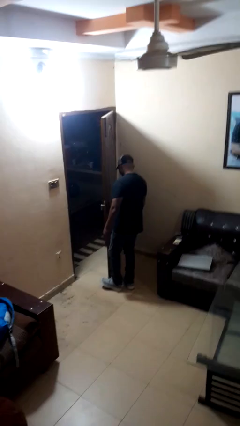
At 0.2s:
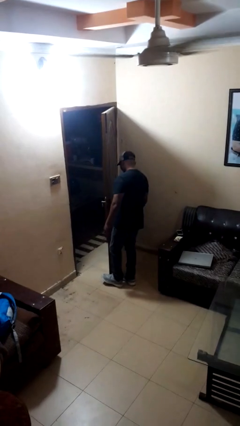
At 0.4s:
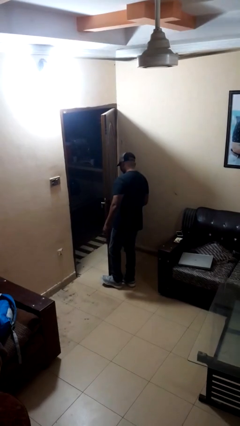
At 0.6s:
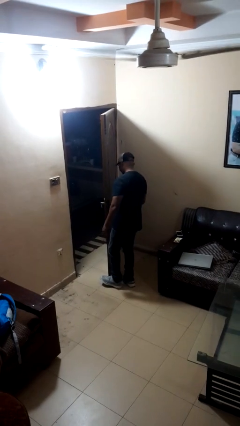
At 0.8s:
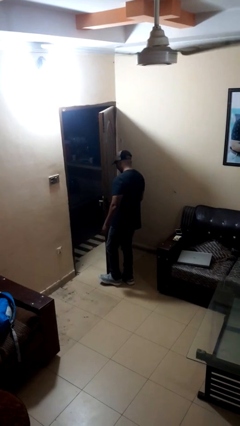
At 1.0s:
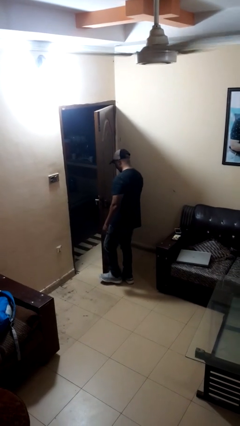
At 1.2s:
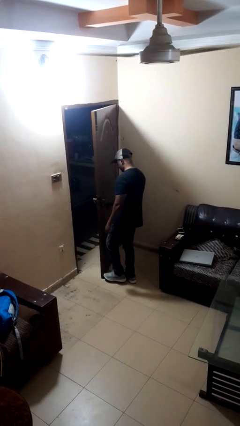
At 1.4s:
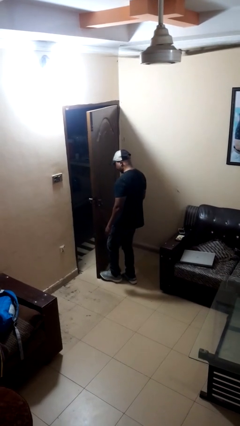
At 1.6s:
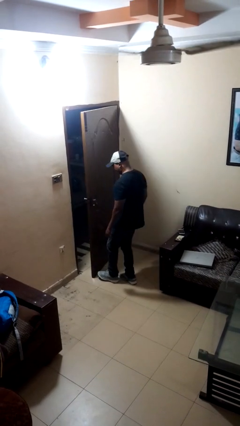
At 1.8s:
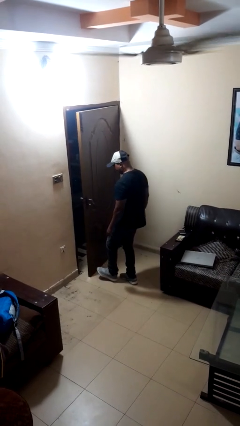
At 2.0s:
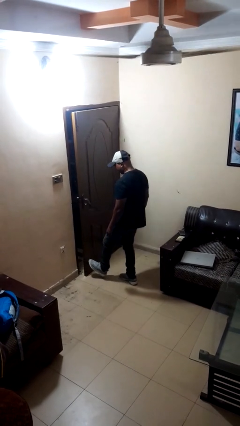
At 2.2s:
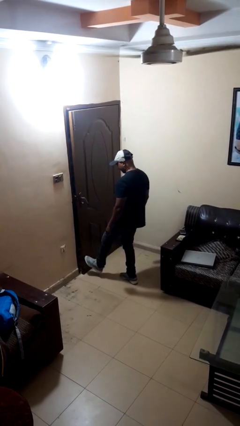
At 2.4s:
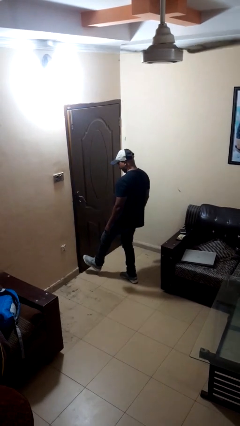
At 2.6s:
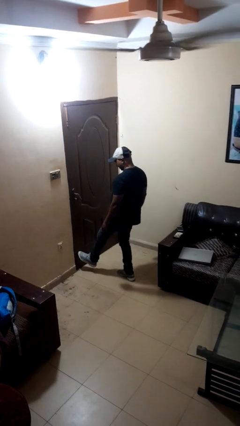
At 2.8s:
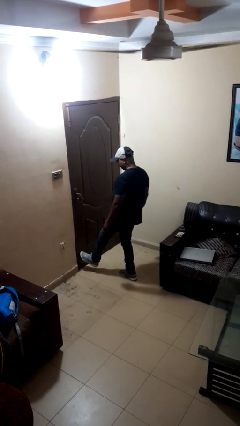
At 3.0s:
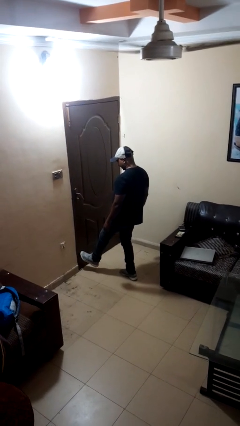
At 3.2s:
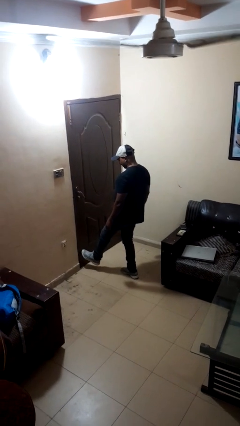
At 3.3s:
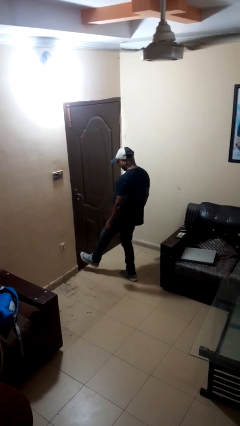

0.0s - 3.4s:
person closes door with foot

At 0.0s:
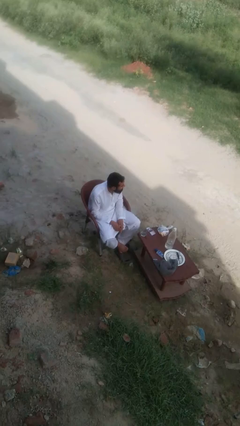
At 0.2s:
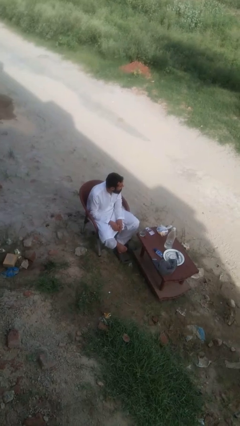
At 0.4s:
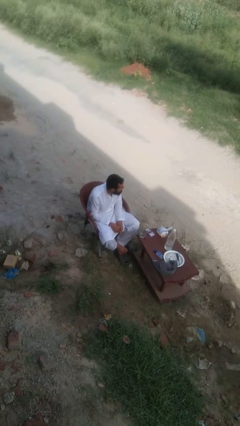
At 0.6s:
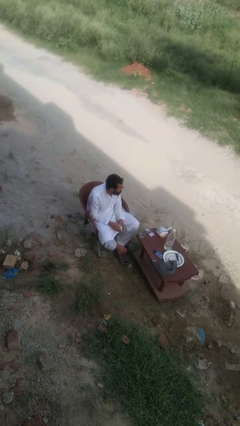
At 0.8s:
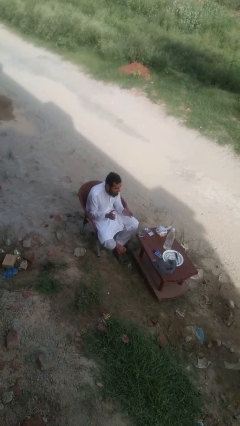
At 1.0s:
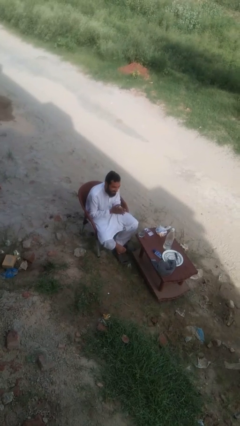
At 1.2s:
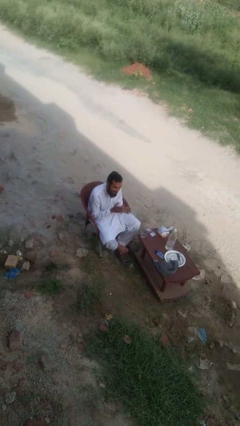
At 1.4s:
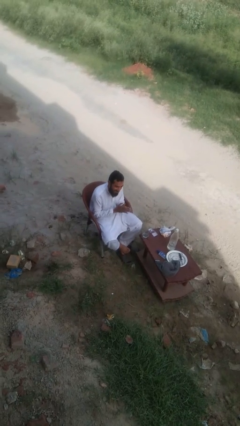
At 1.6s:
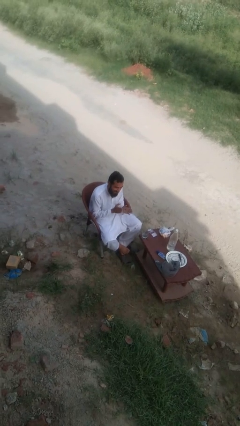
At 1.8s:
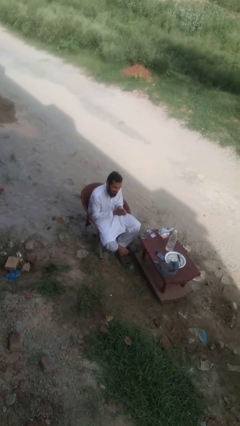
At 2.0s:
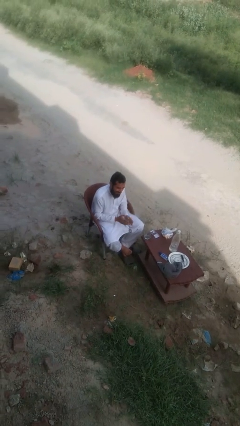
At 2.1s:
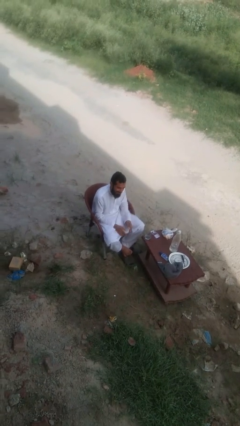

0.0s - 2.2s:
person claps hands

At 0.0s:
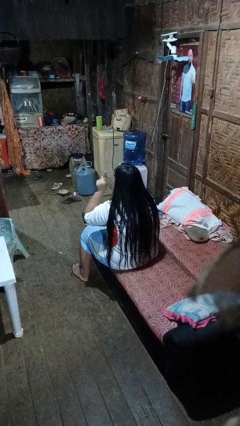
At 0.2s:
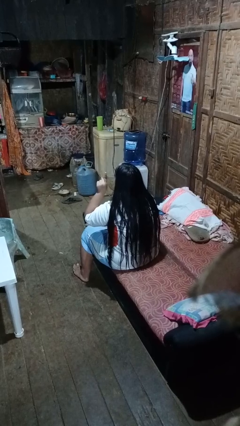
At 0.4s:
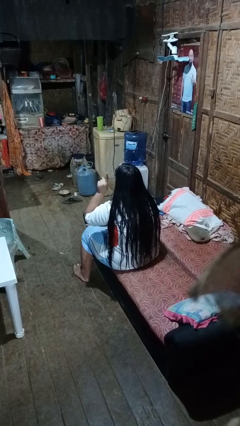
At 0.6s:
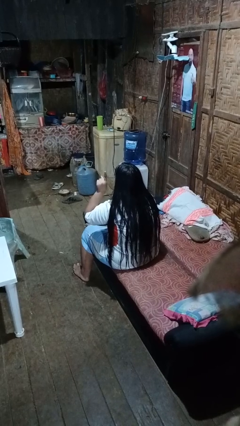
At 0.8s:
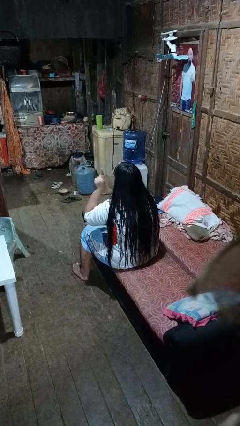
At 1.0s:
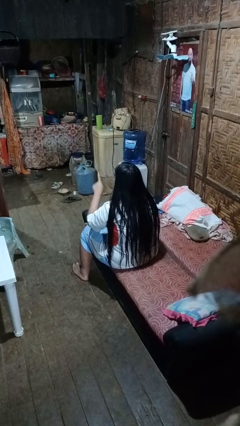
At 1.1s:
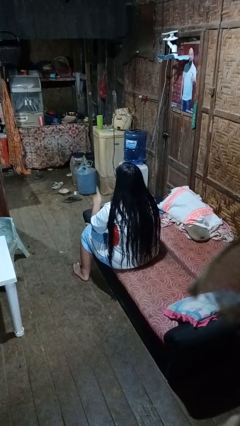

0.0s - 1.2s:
person gestures number one

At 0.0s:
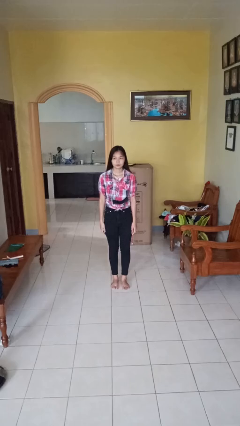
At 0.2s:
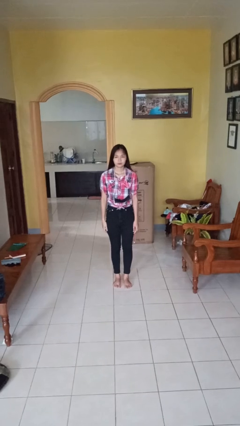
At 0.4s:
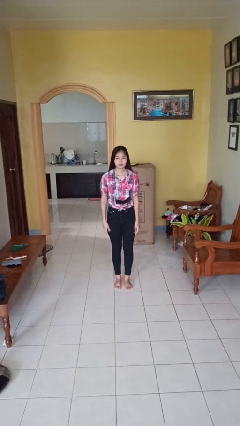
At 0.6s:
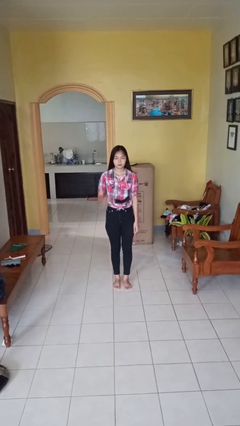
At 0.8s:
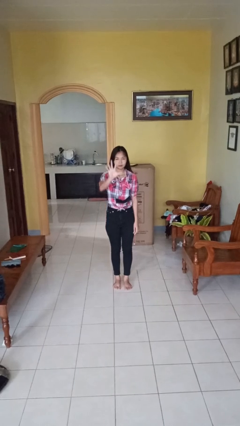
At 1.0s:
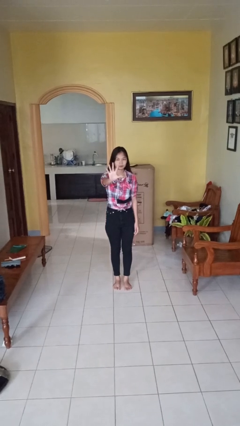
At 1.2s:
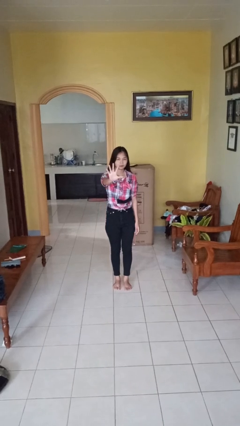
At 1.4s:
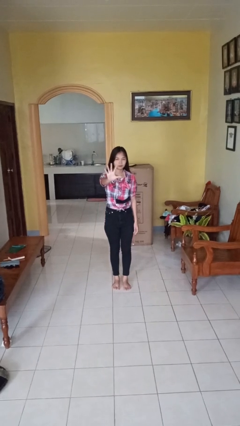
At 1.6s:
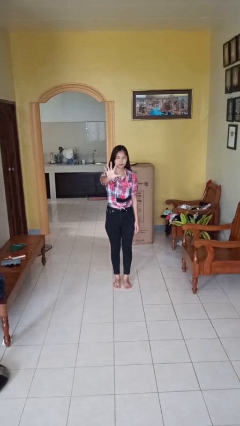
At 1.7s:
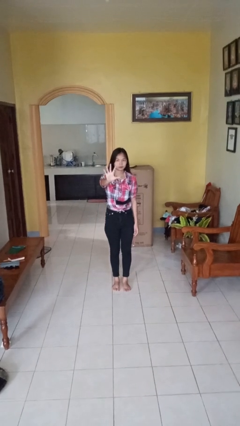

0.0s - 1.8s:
person gestures number five

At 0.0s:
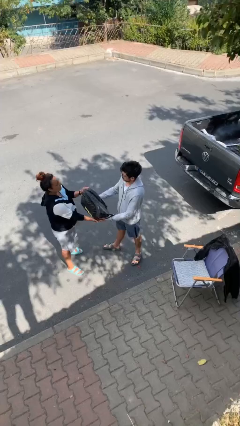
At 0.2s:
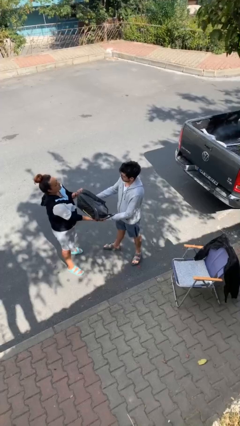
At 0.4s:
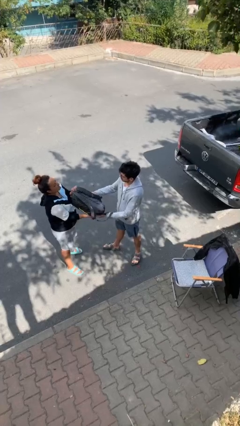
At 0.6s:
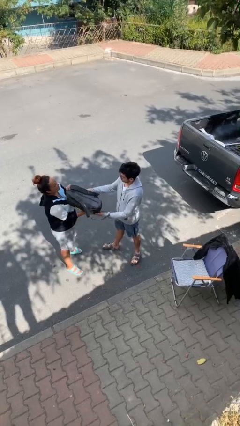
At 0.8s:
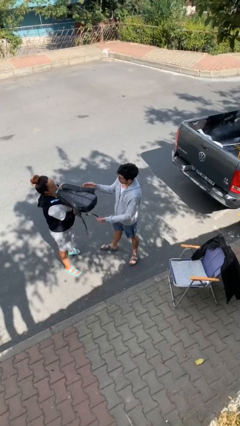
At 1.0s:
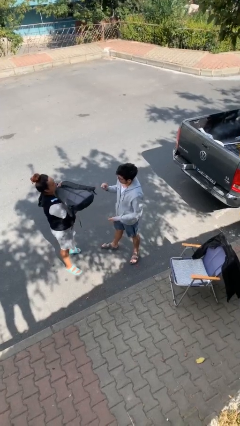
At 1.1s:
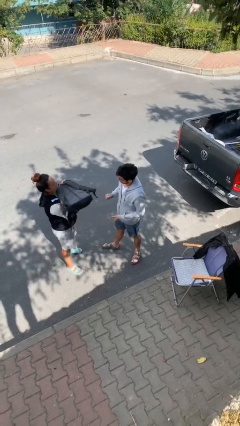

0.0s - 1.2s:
person transfers object to person

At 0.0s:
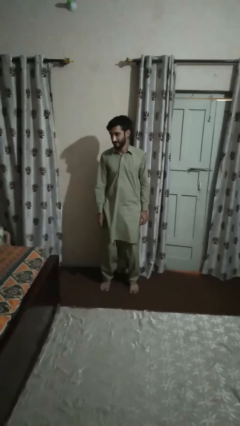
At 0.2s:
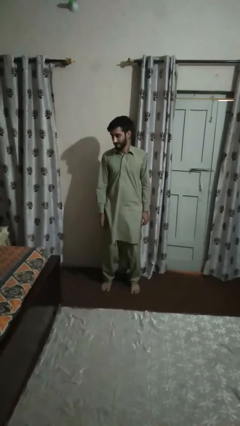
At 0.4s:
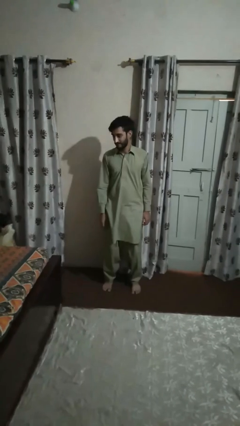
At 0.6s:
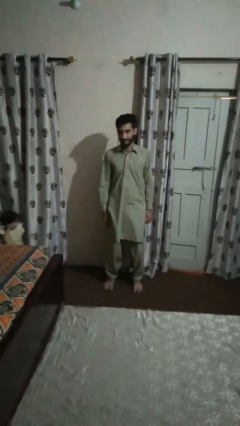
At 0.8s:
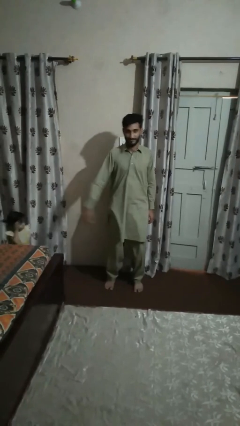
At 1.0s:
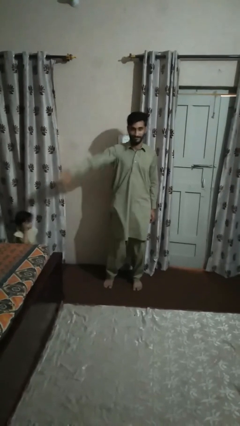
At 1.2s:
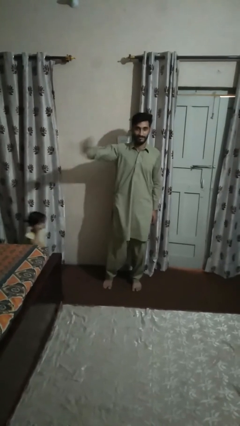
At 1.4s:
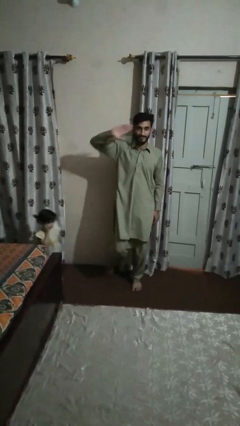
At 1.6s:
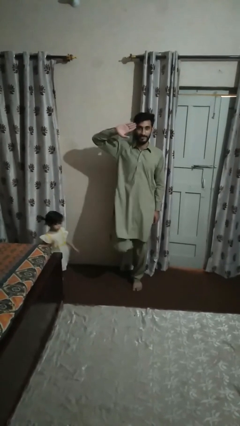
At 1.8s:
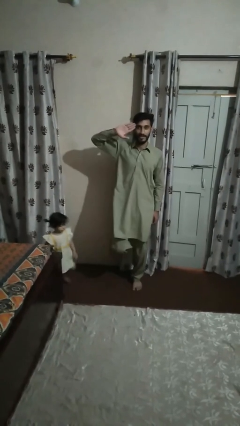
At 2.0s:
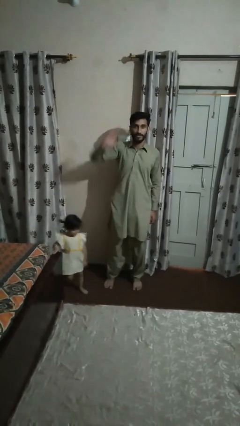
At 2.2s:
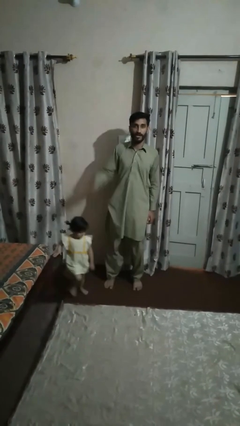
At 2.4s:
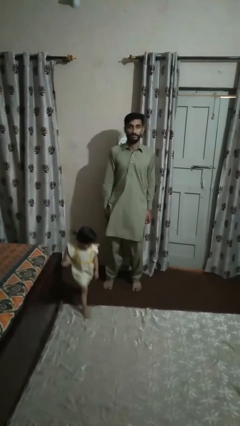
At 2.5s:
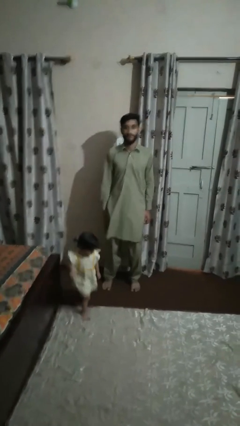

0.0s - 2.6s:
person salutes

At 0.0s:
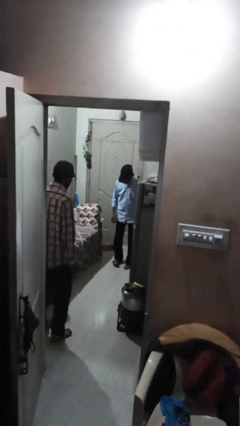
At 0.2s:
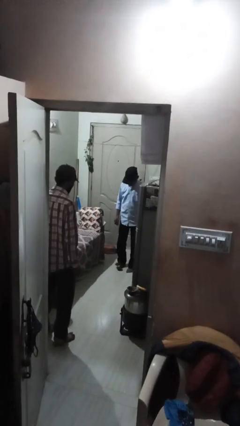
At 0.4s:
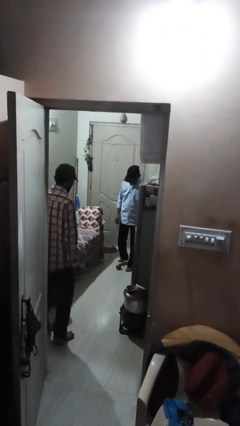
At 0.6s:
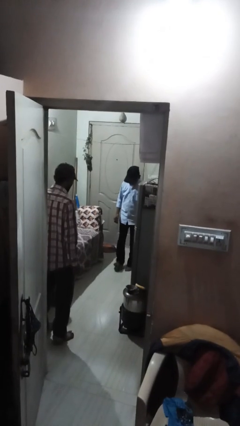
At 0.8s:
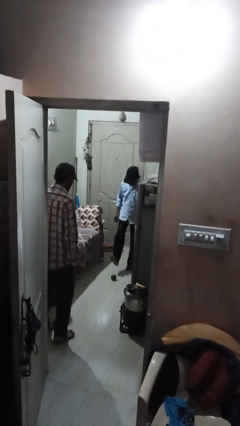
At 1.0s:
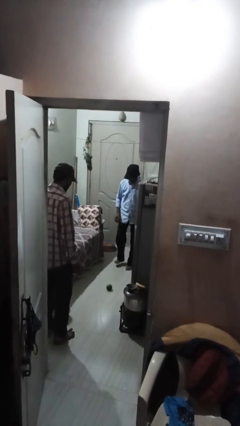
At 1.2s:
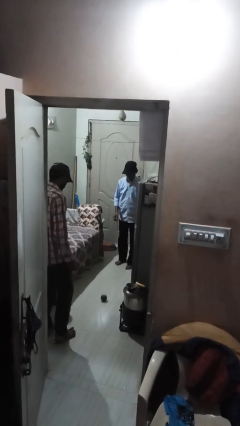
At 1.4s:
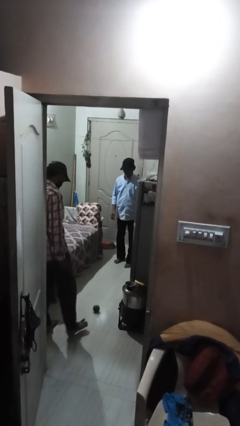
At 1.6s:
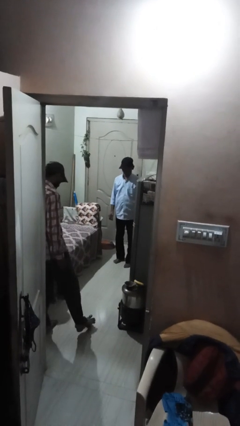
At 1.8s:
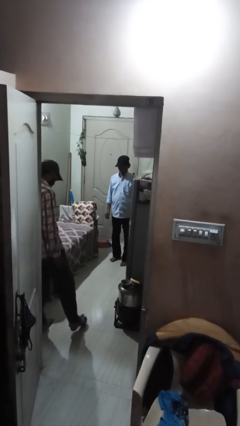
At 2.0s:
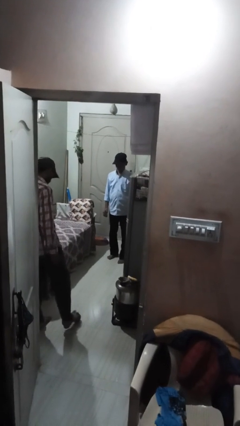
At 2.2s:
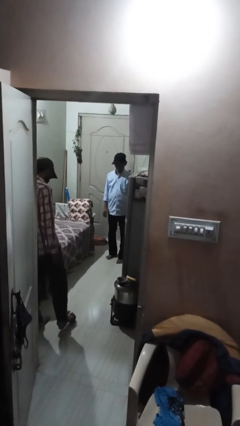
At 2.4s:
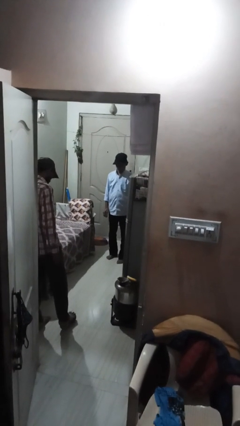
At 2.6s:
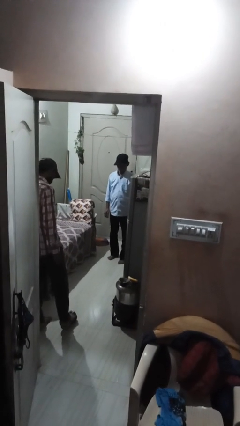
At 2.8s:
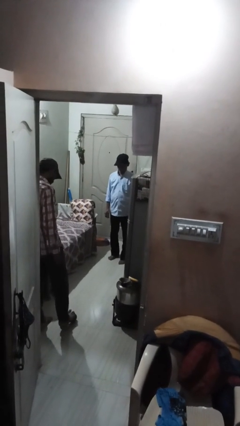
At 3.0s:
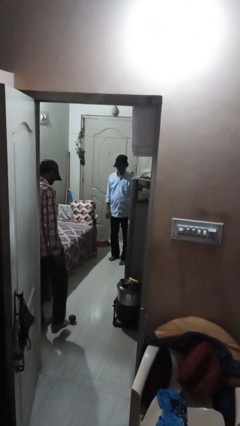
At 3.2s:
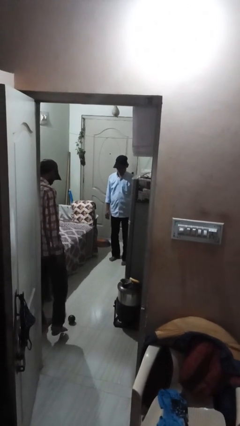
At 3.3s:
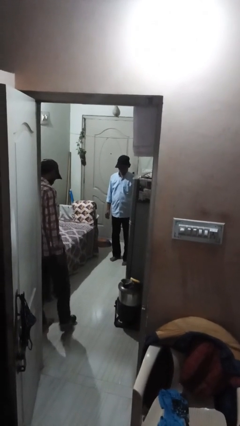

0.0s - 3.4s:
person kicks object to person

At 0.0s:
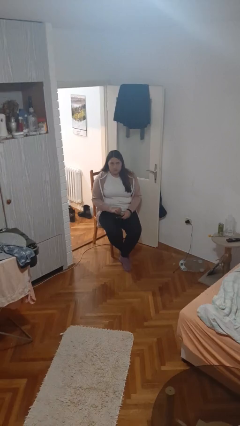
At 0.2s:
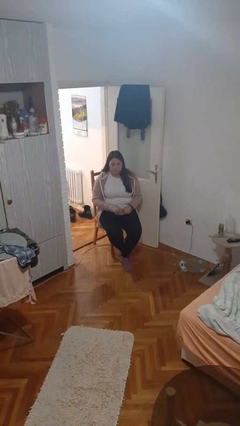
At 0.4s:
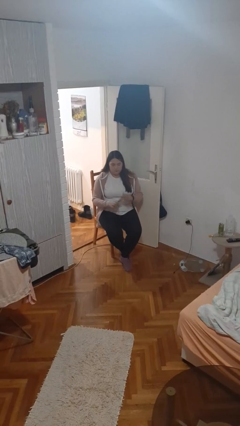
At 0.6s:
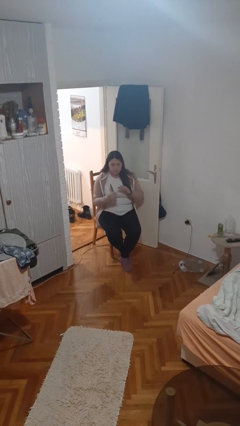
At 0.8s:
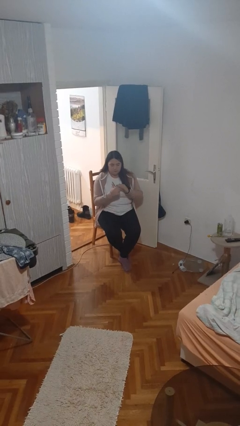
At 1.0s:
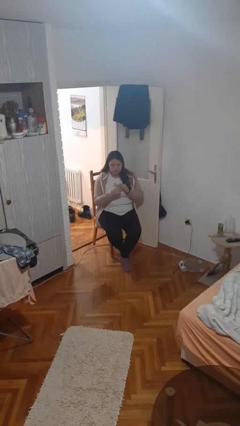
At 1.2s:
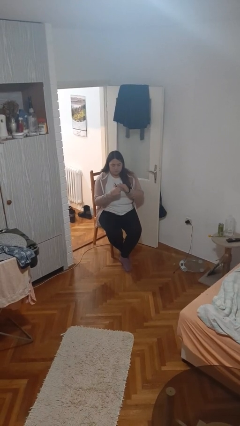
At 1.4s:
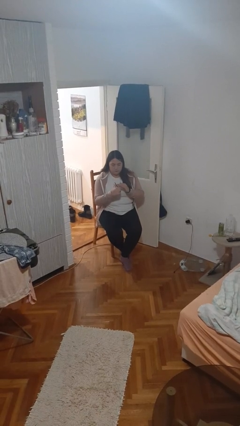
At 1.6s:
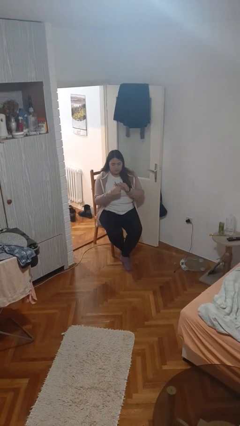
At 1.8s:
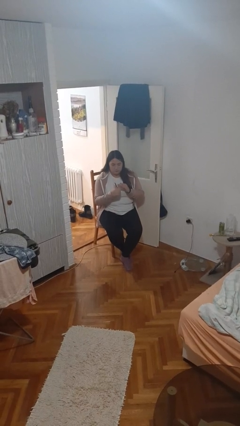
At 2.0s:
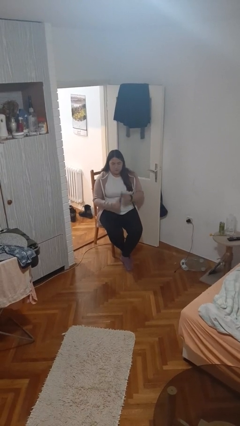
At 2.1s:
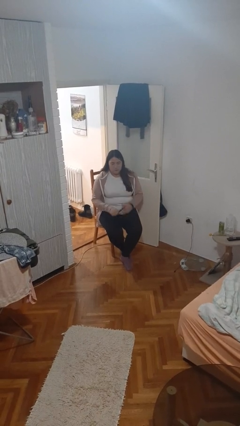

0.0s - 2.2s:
person files fingernails
